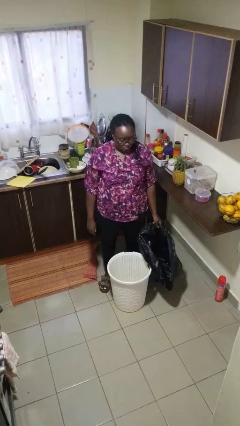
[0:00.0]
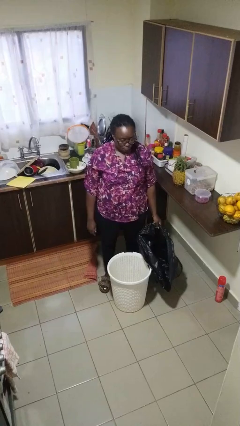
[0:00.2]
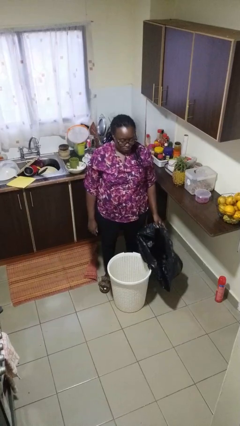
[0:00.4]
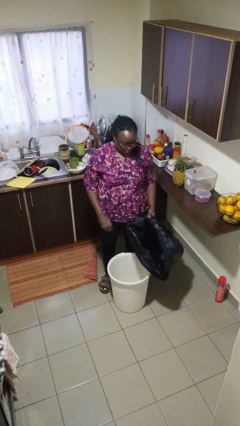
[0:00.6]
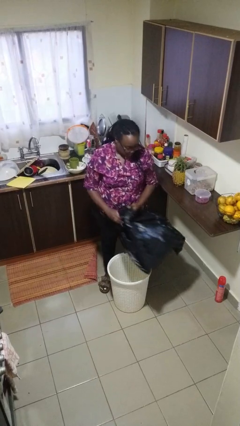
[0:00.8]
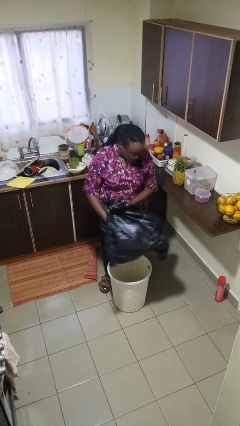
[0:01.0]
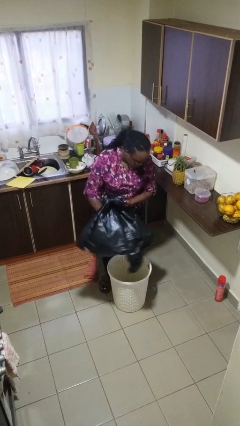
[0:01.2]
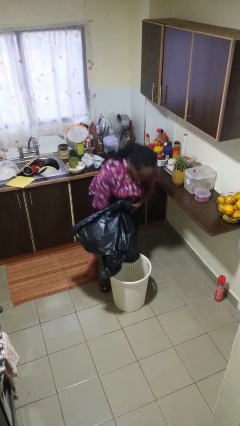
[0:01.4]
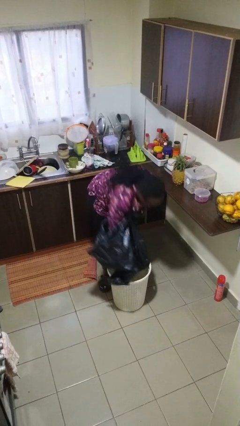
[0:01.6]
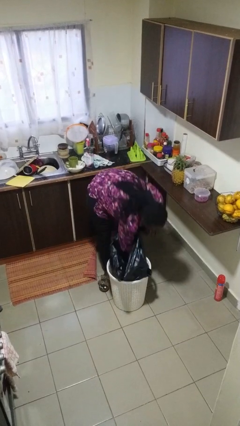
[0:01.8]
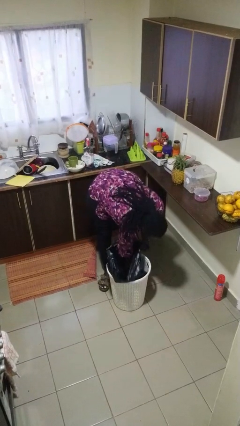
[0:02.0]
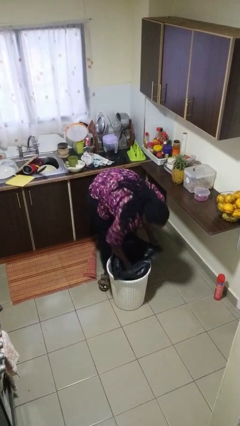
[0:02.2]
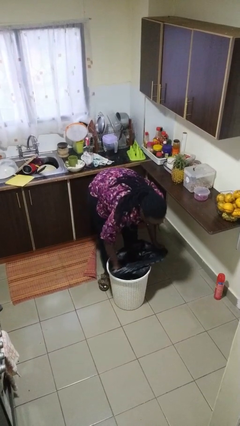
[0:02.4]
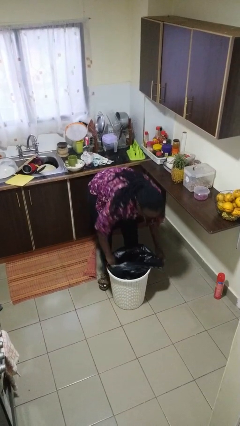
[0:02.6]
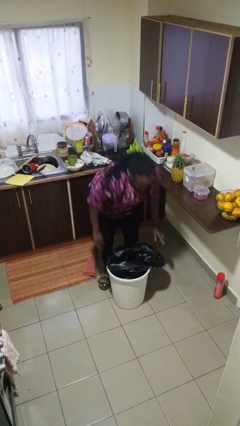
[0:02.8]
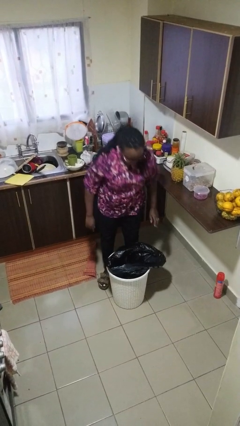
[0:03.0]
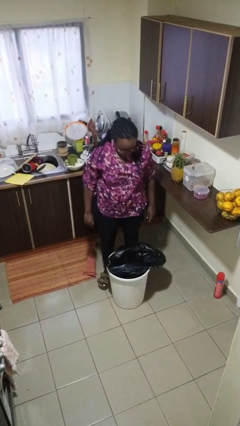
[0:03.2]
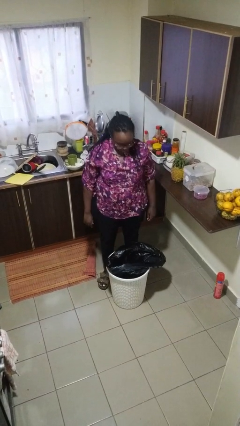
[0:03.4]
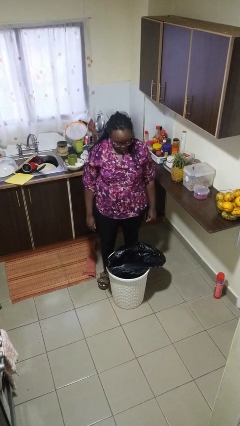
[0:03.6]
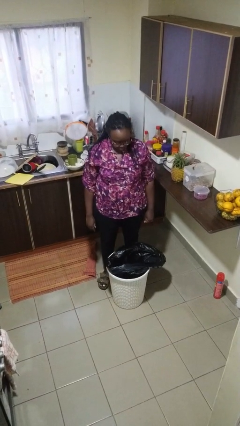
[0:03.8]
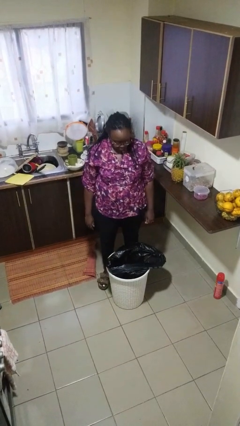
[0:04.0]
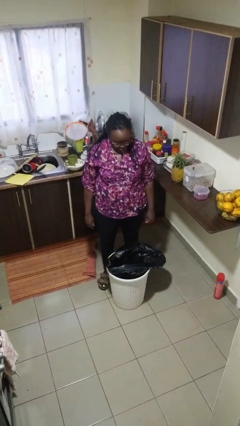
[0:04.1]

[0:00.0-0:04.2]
person removes trashbag from trashcan

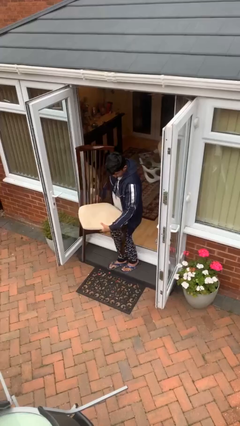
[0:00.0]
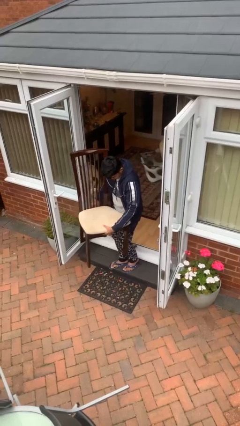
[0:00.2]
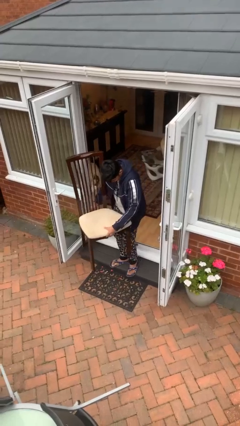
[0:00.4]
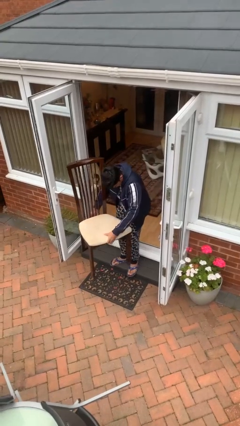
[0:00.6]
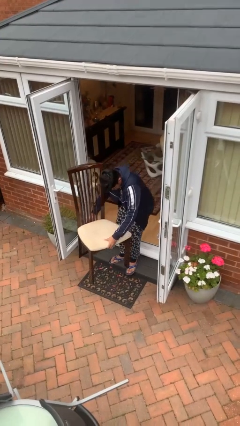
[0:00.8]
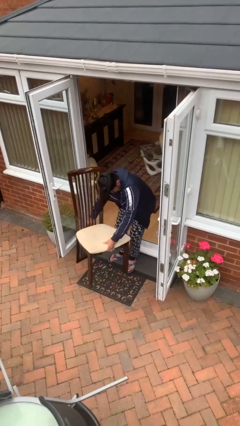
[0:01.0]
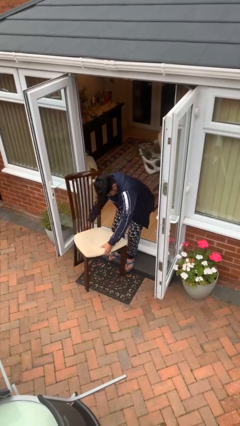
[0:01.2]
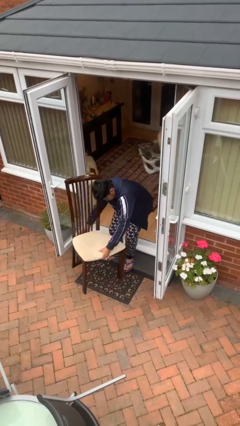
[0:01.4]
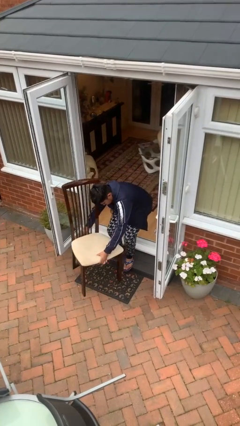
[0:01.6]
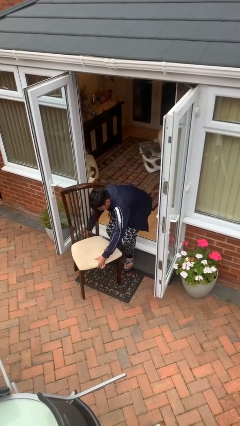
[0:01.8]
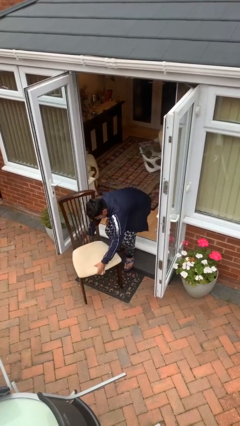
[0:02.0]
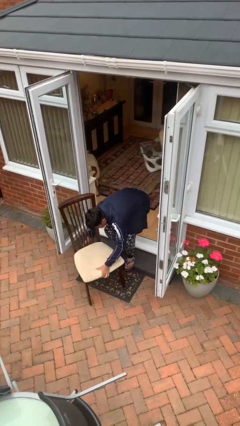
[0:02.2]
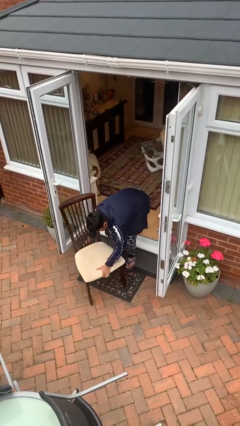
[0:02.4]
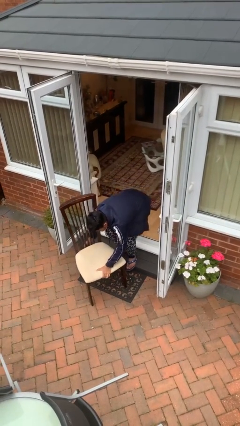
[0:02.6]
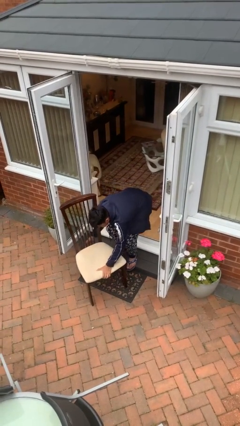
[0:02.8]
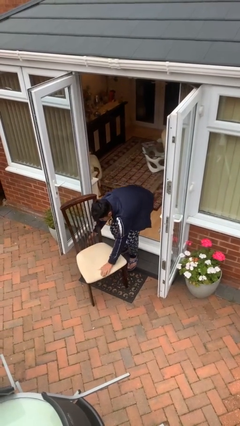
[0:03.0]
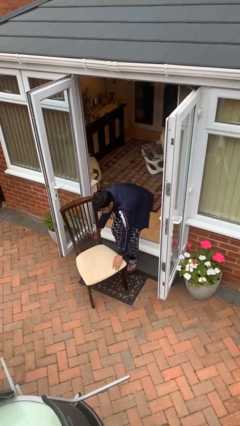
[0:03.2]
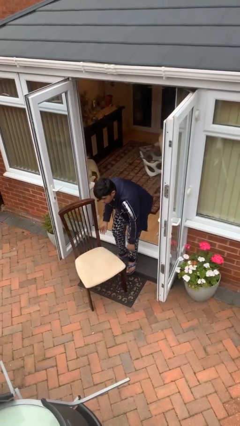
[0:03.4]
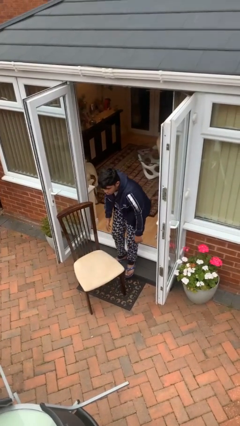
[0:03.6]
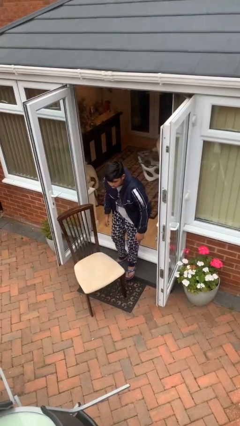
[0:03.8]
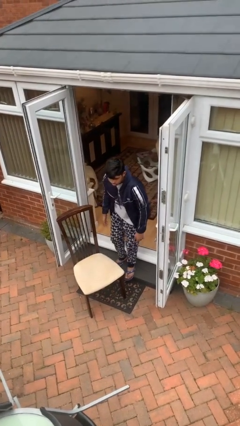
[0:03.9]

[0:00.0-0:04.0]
person puts down object on floor

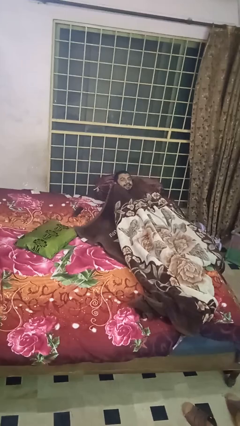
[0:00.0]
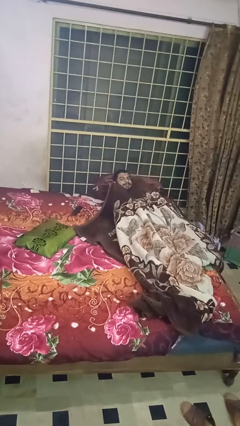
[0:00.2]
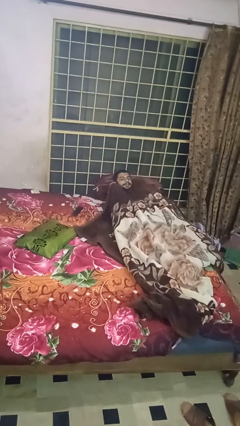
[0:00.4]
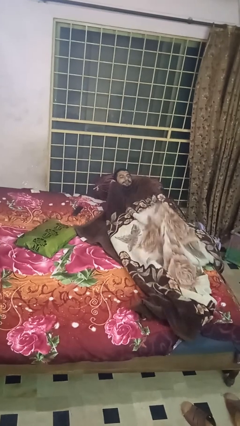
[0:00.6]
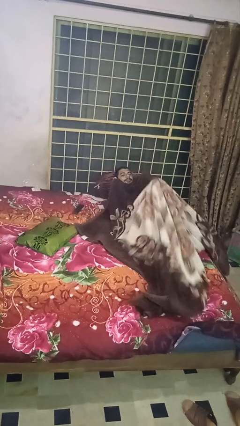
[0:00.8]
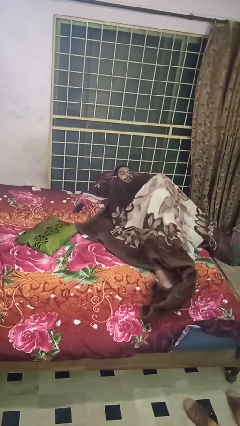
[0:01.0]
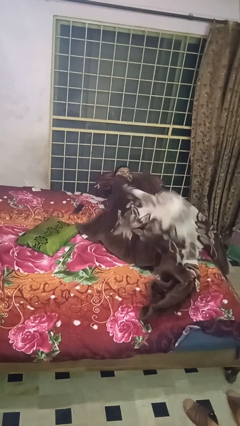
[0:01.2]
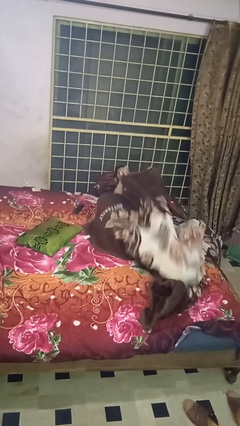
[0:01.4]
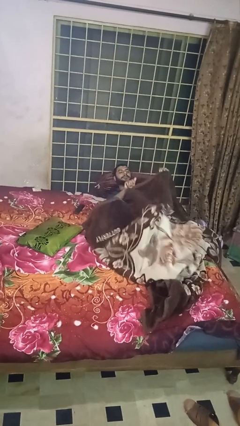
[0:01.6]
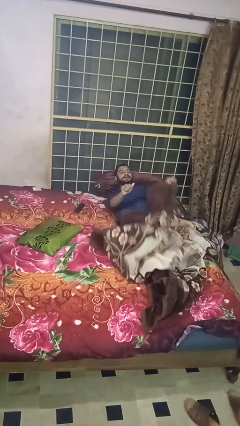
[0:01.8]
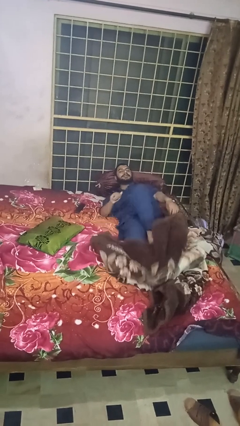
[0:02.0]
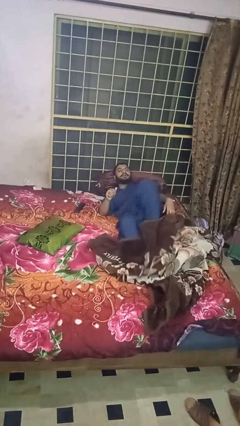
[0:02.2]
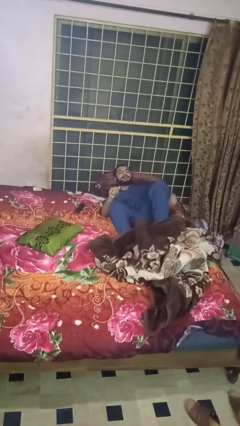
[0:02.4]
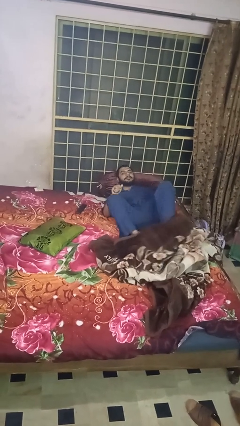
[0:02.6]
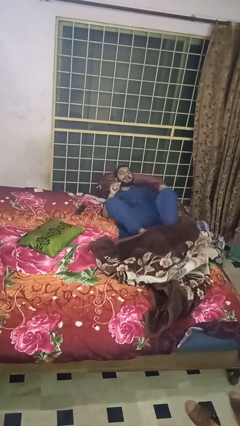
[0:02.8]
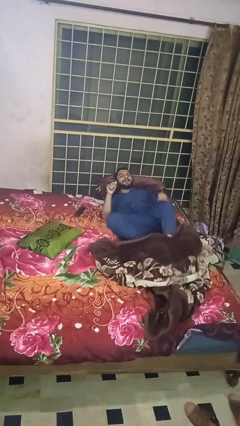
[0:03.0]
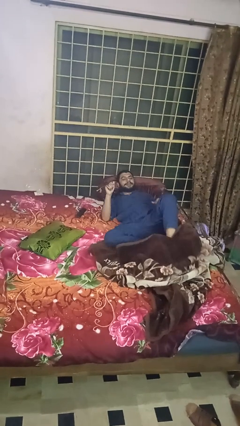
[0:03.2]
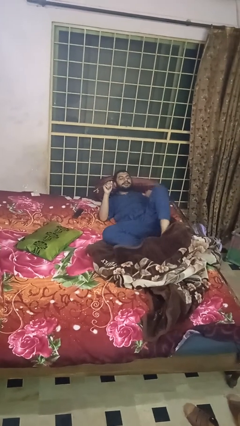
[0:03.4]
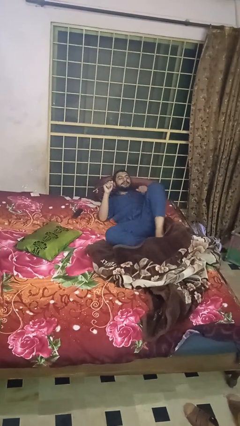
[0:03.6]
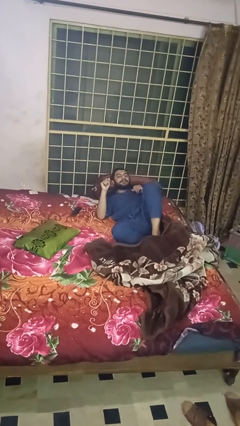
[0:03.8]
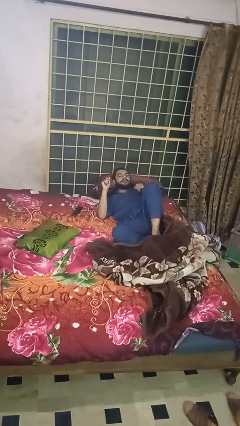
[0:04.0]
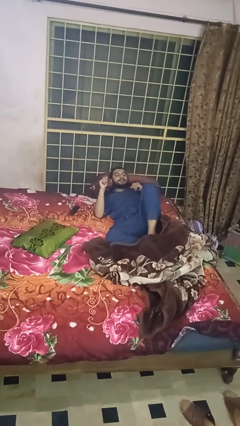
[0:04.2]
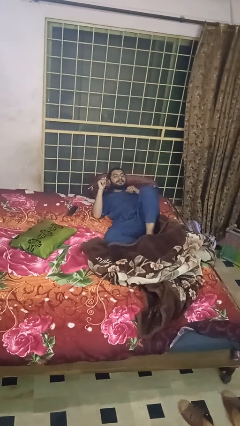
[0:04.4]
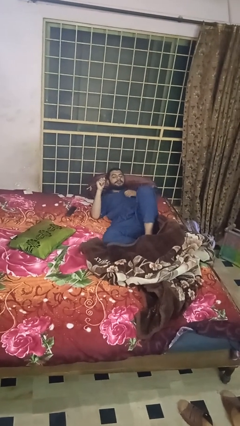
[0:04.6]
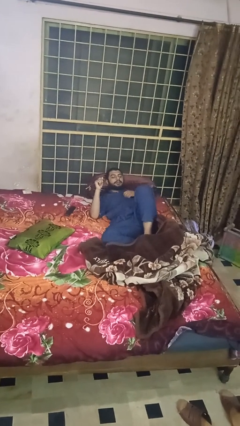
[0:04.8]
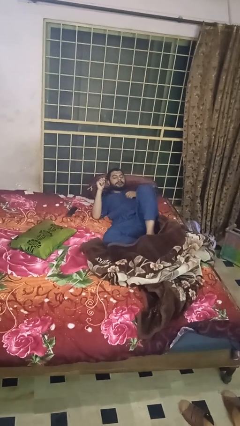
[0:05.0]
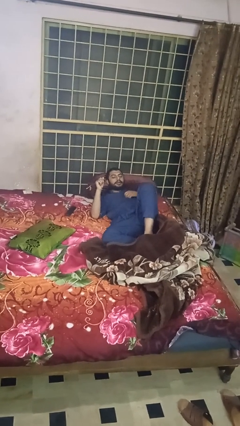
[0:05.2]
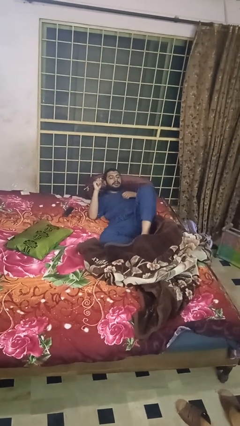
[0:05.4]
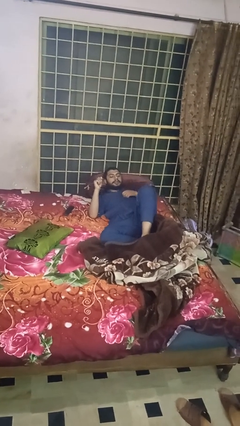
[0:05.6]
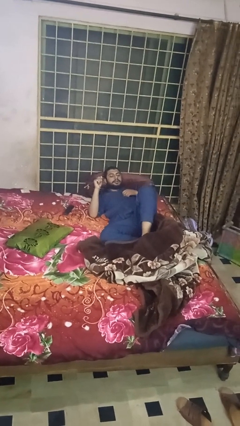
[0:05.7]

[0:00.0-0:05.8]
person uncovers with blanket

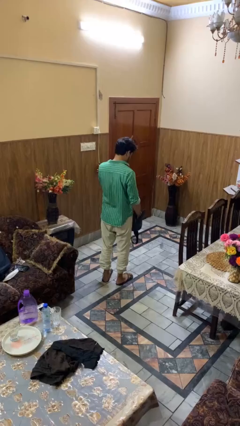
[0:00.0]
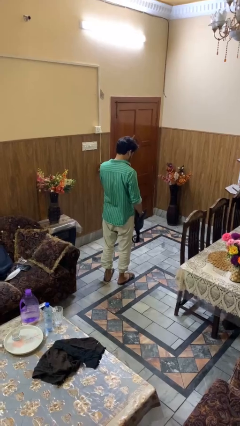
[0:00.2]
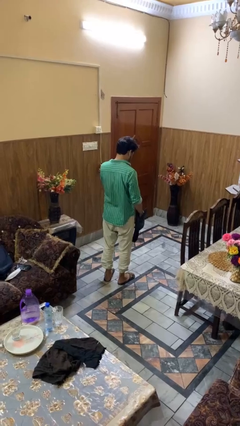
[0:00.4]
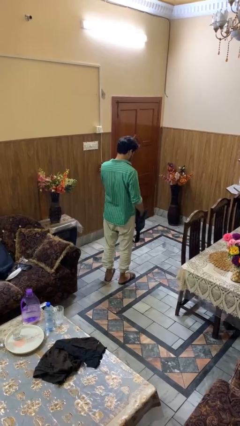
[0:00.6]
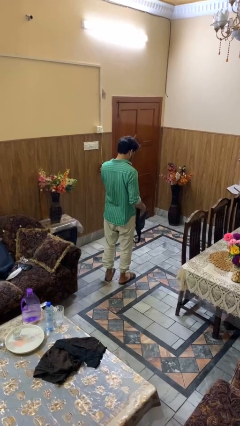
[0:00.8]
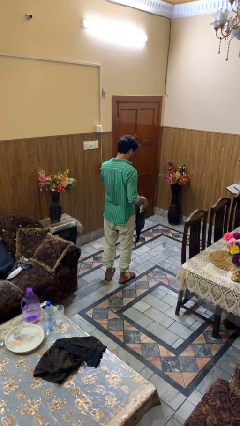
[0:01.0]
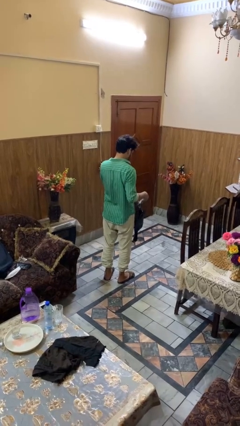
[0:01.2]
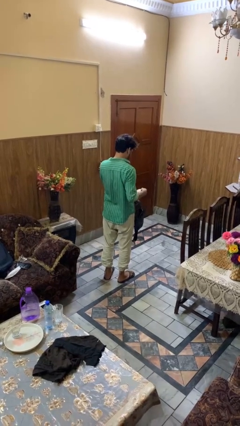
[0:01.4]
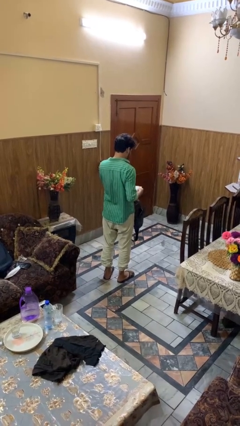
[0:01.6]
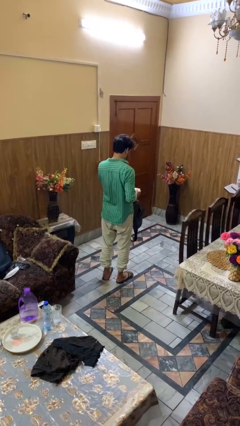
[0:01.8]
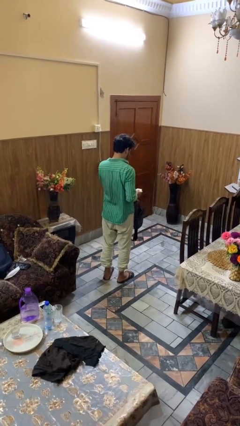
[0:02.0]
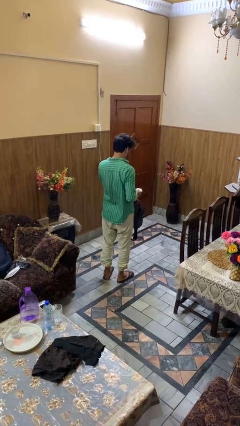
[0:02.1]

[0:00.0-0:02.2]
person takes object from purse

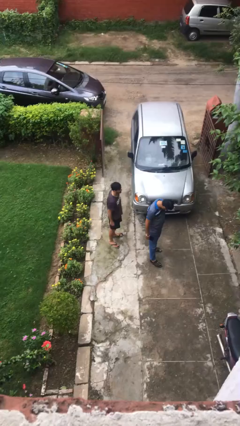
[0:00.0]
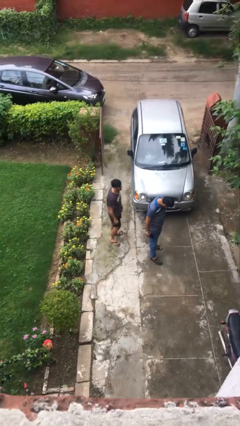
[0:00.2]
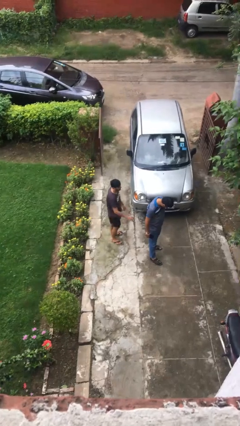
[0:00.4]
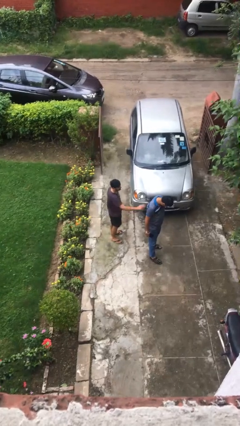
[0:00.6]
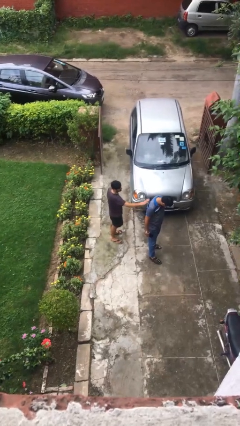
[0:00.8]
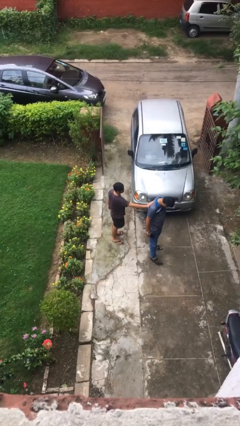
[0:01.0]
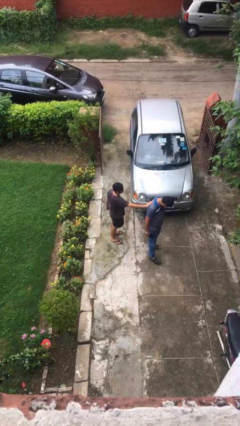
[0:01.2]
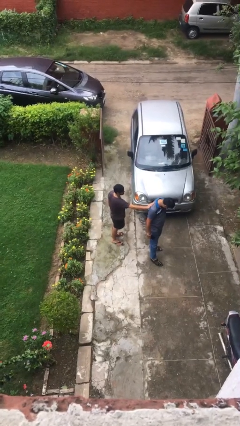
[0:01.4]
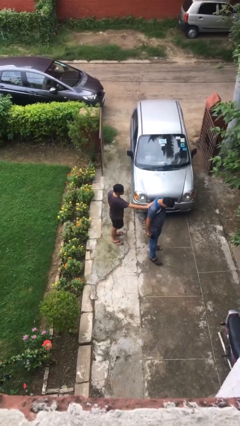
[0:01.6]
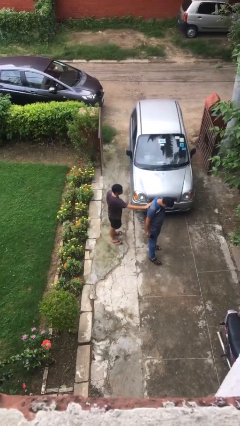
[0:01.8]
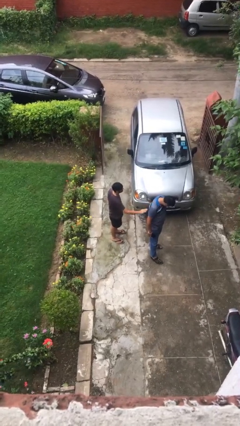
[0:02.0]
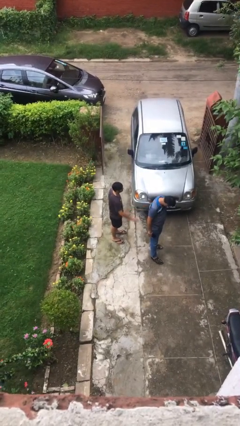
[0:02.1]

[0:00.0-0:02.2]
person touches back of person
